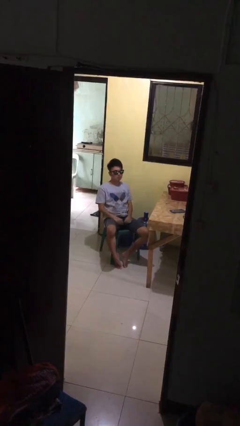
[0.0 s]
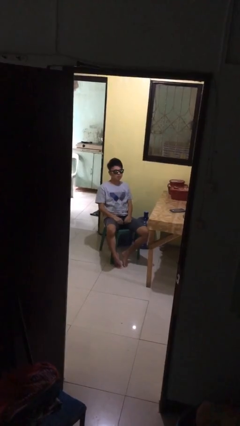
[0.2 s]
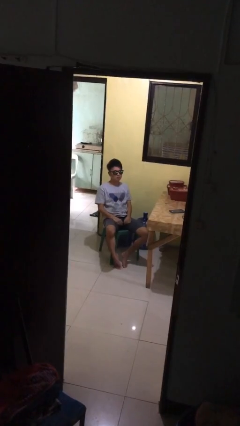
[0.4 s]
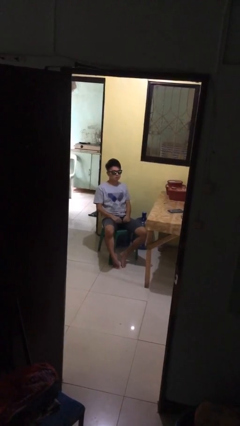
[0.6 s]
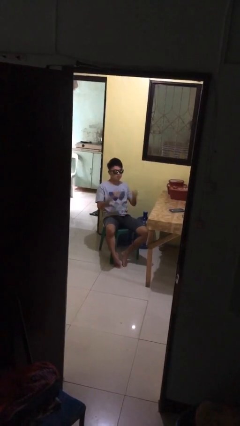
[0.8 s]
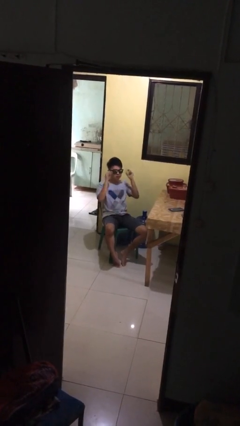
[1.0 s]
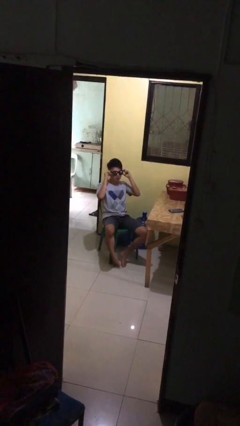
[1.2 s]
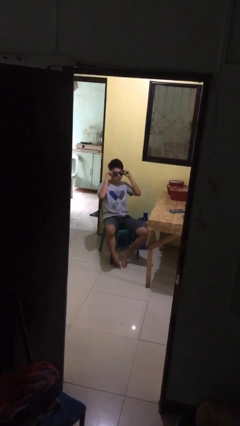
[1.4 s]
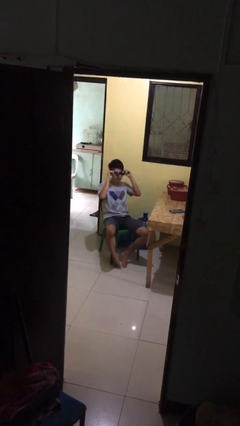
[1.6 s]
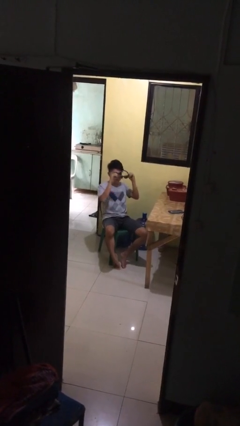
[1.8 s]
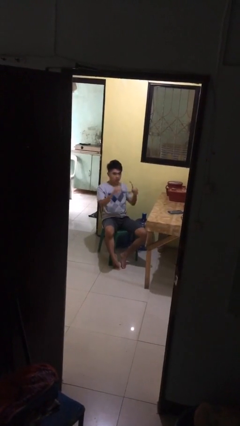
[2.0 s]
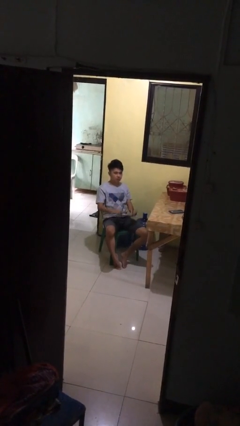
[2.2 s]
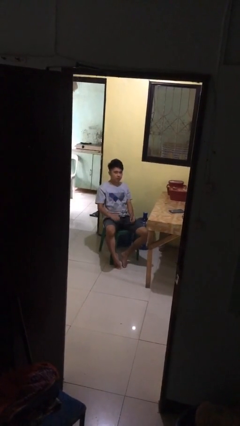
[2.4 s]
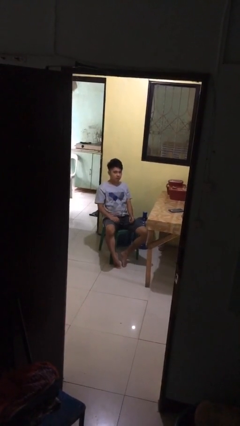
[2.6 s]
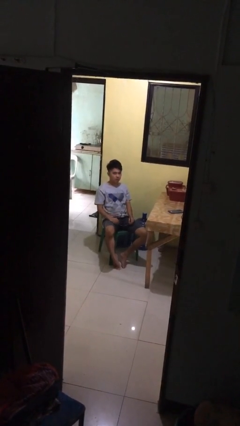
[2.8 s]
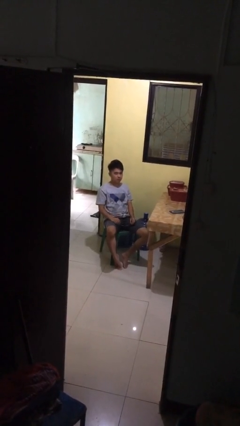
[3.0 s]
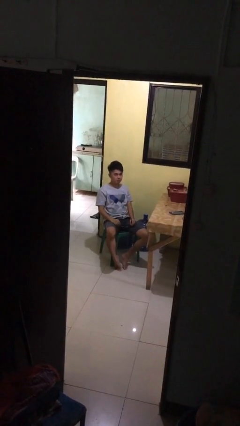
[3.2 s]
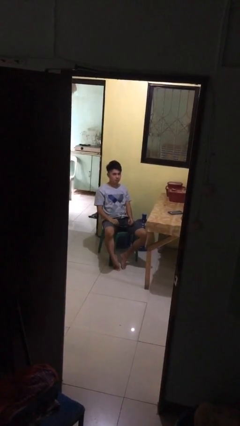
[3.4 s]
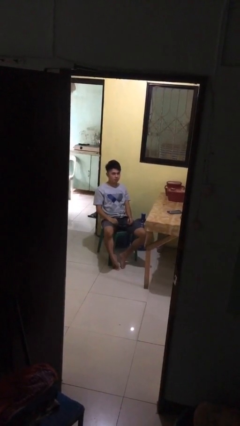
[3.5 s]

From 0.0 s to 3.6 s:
person takes off sunglasses

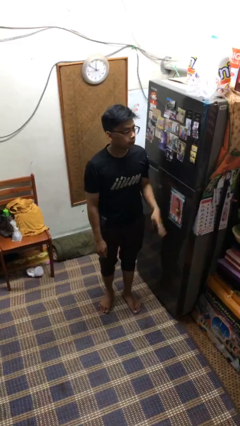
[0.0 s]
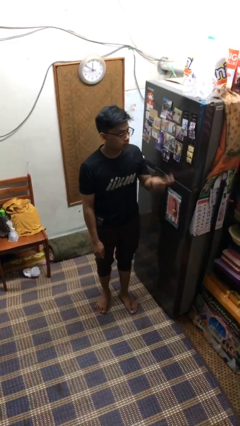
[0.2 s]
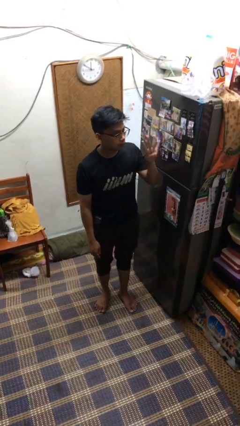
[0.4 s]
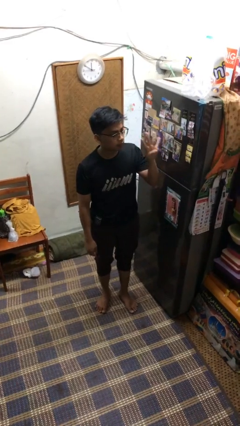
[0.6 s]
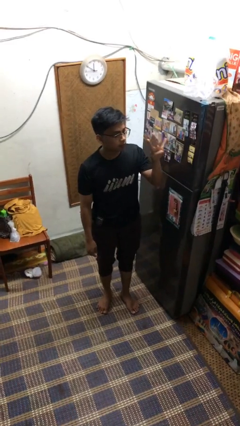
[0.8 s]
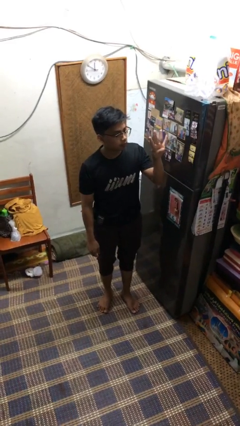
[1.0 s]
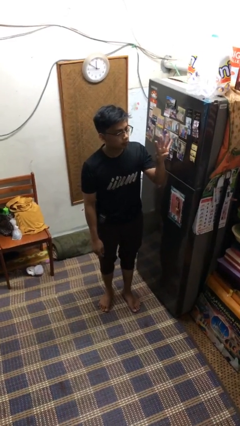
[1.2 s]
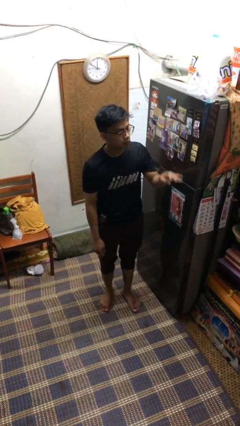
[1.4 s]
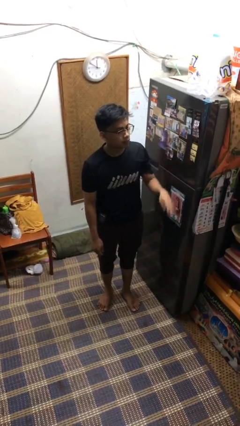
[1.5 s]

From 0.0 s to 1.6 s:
person gestures number four

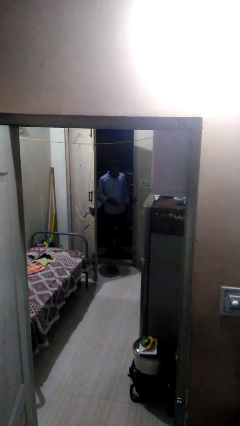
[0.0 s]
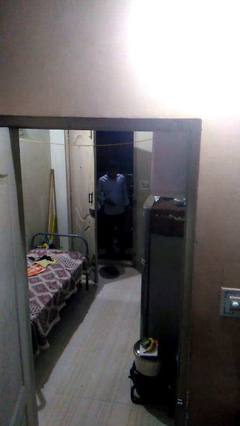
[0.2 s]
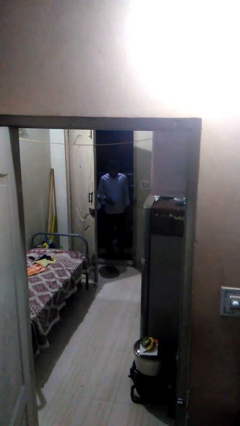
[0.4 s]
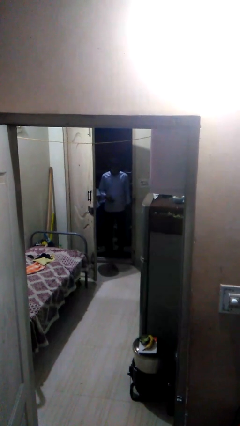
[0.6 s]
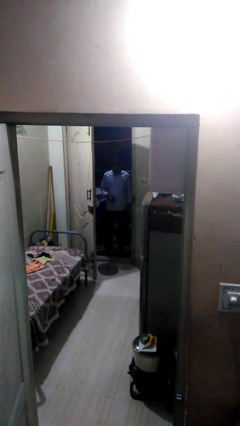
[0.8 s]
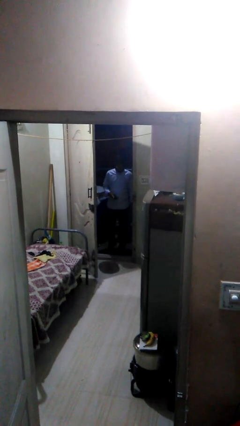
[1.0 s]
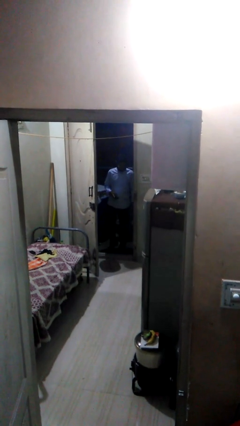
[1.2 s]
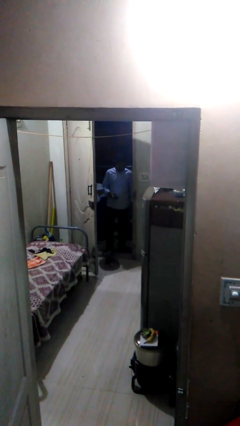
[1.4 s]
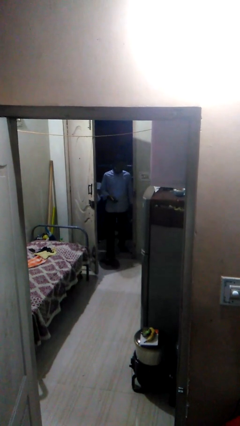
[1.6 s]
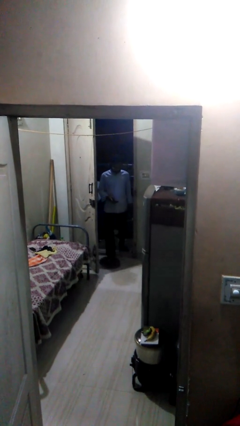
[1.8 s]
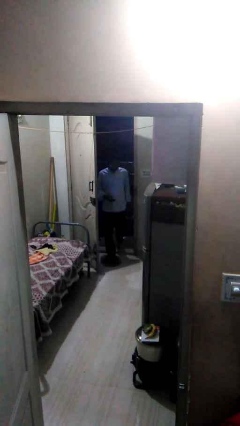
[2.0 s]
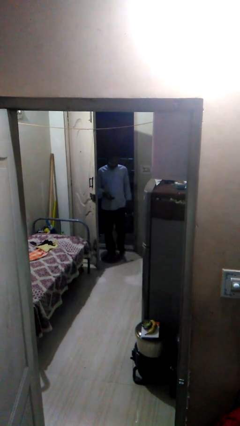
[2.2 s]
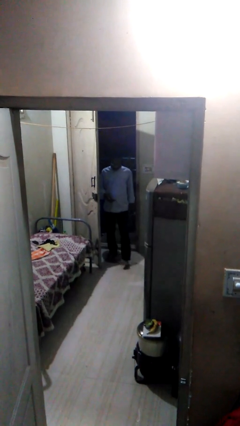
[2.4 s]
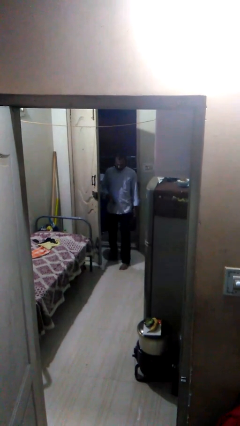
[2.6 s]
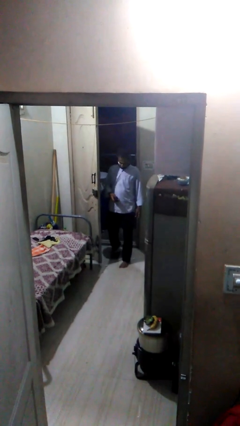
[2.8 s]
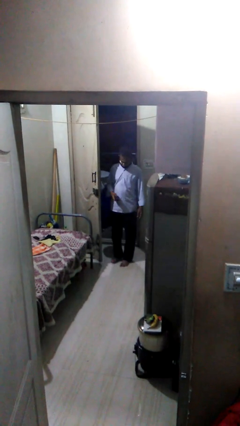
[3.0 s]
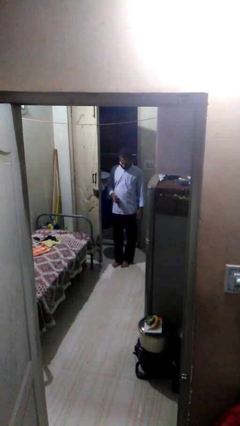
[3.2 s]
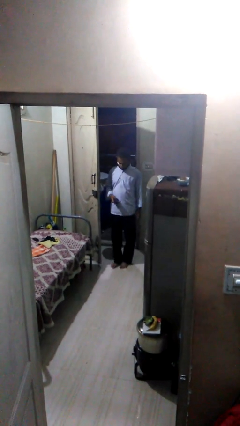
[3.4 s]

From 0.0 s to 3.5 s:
person enters scene through structure

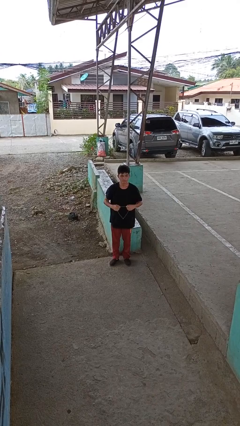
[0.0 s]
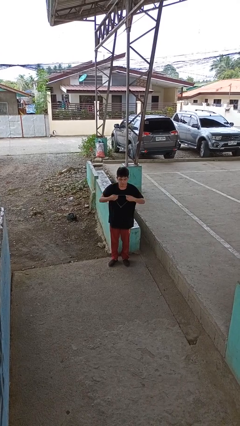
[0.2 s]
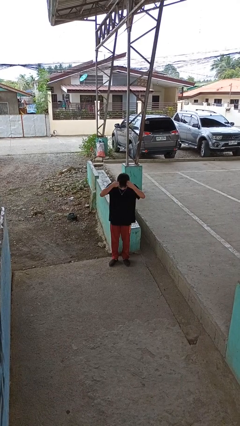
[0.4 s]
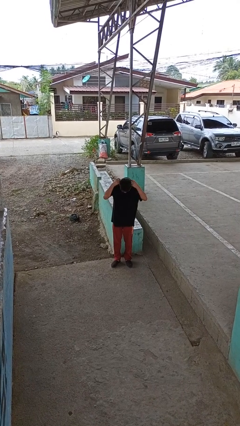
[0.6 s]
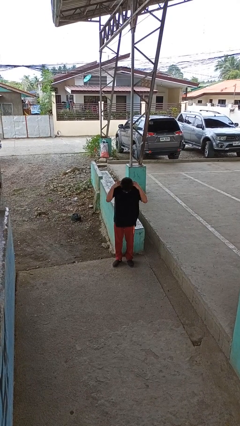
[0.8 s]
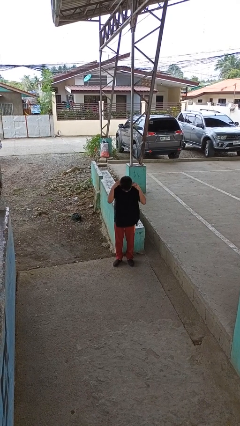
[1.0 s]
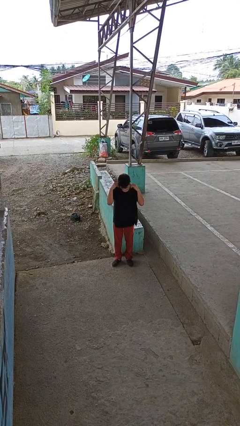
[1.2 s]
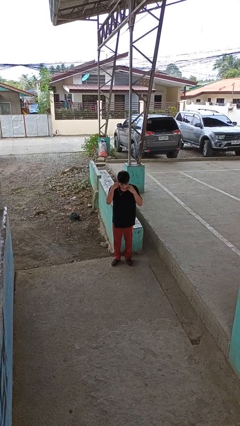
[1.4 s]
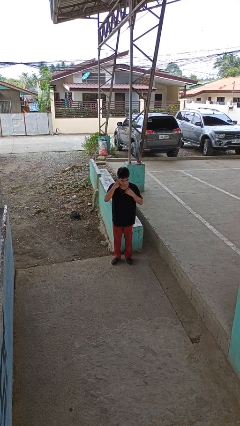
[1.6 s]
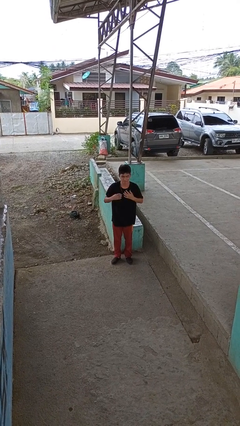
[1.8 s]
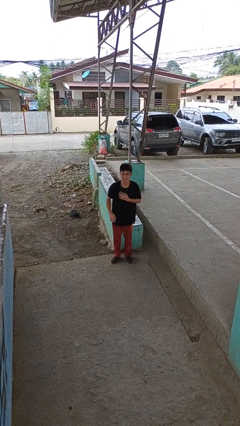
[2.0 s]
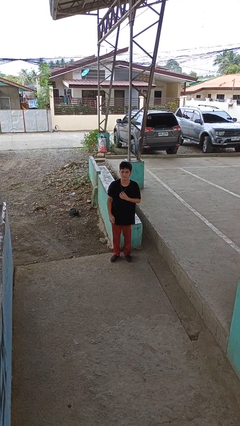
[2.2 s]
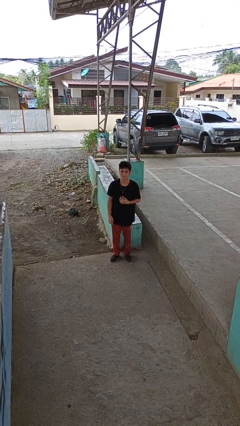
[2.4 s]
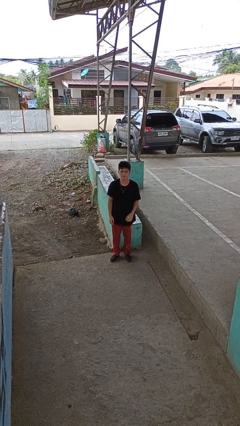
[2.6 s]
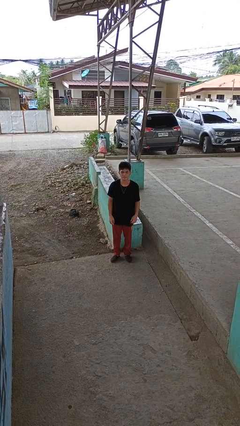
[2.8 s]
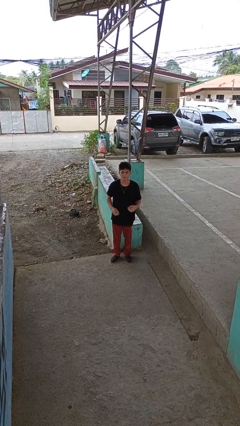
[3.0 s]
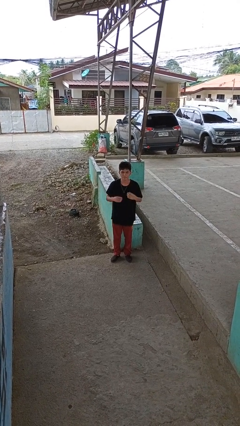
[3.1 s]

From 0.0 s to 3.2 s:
person puts on necklace

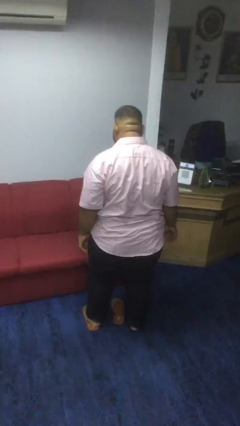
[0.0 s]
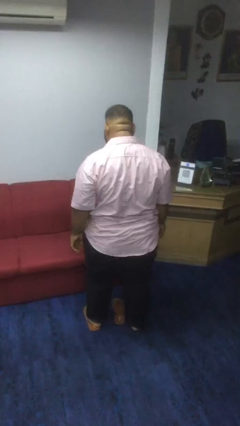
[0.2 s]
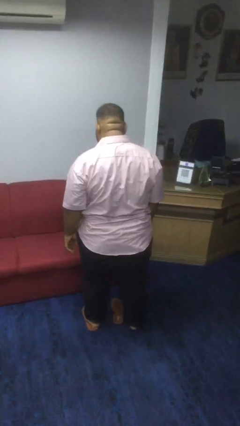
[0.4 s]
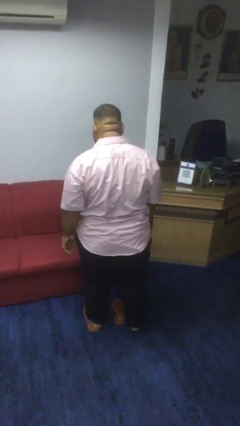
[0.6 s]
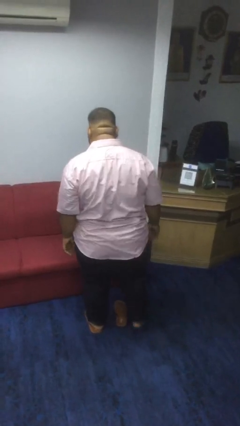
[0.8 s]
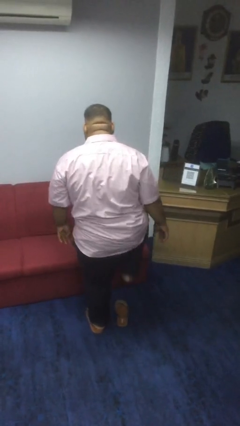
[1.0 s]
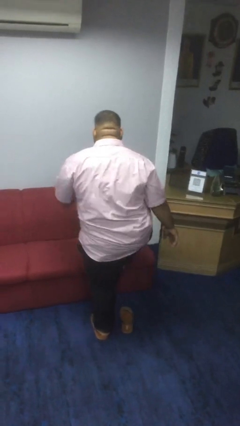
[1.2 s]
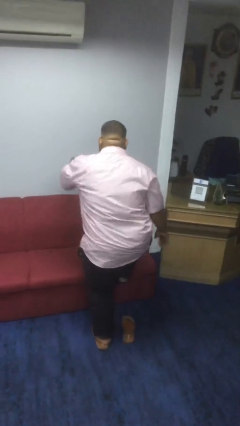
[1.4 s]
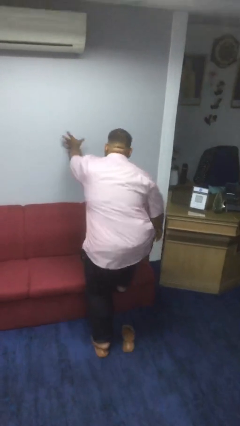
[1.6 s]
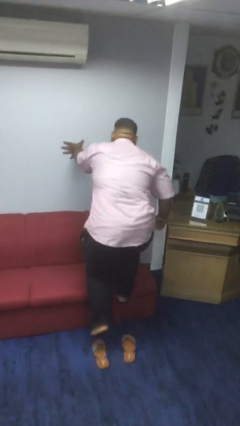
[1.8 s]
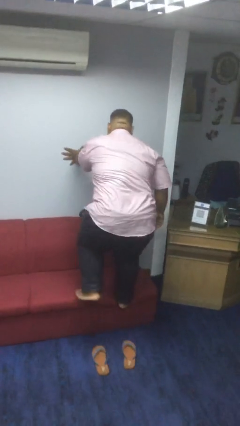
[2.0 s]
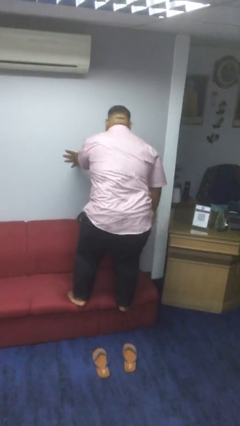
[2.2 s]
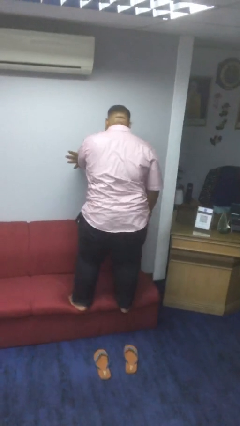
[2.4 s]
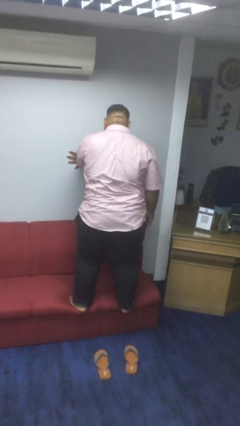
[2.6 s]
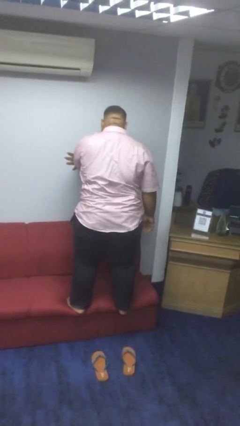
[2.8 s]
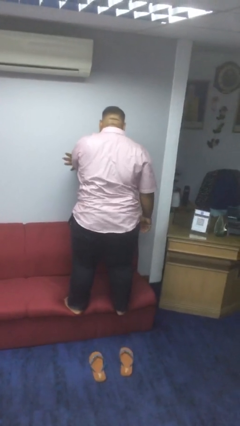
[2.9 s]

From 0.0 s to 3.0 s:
person climbs on couch

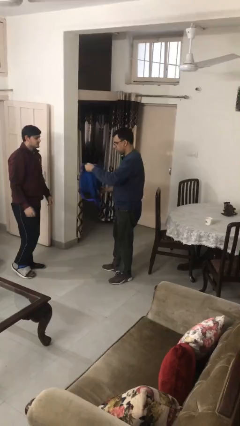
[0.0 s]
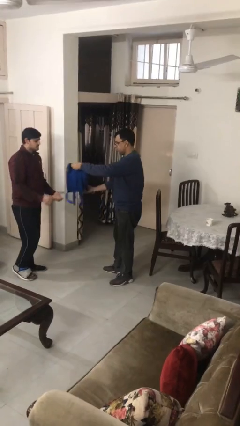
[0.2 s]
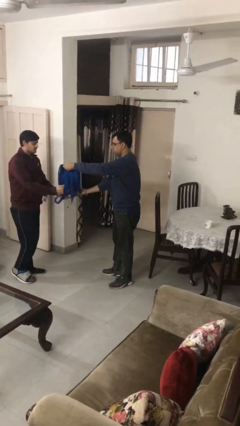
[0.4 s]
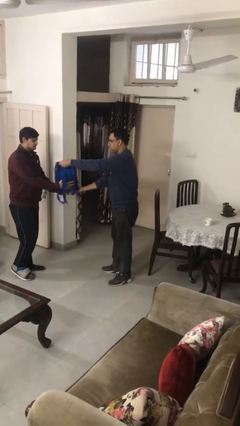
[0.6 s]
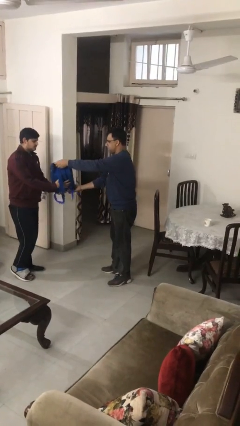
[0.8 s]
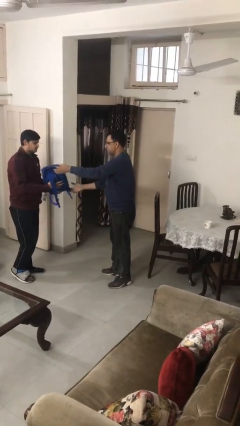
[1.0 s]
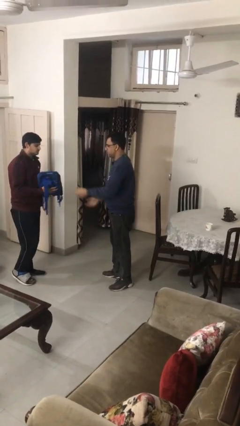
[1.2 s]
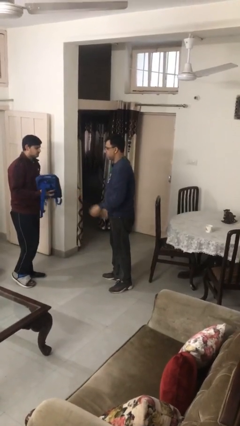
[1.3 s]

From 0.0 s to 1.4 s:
person transfers object to person

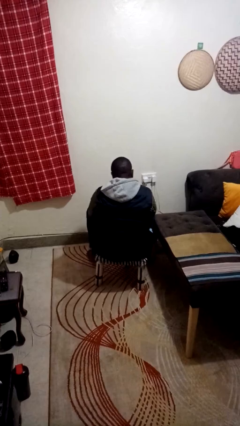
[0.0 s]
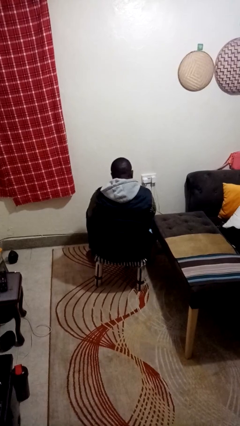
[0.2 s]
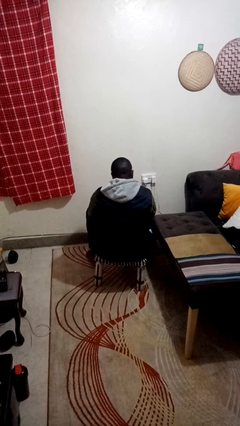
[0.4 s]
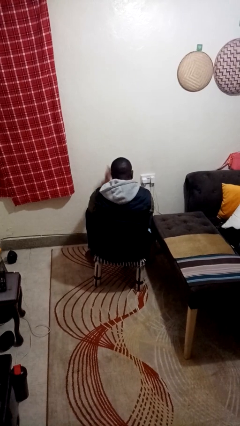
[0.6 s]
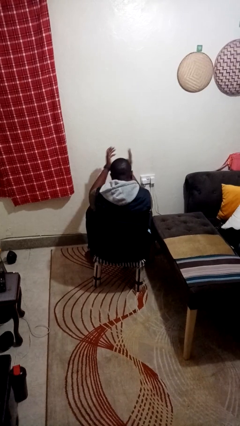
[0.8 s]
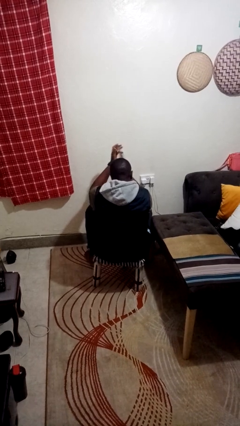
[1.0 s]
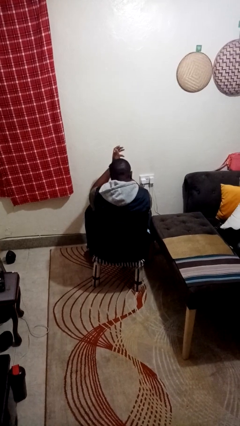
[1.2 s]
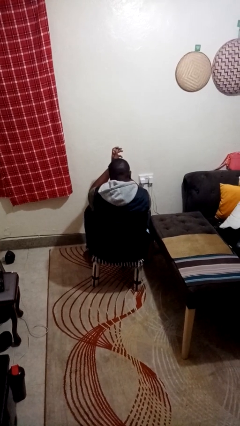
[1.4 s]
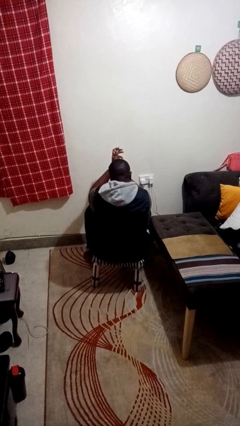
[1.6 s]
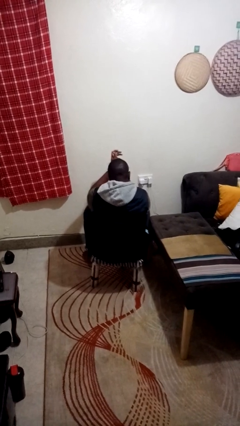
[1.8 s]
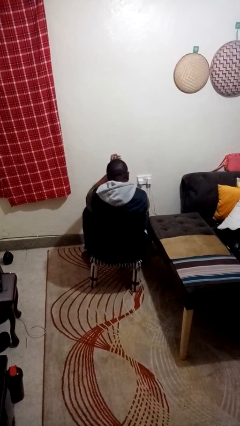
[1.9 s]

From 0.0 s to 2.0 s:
person claps hands
